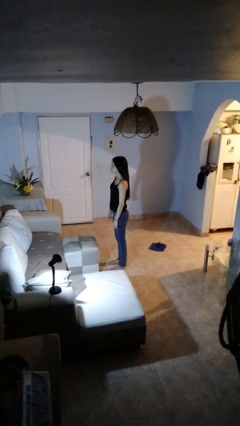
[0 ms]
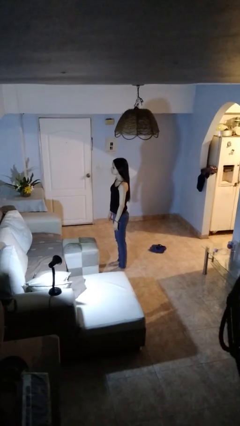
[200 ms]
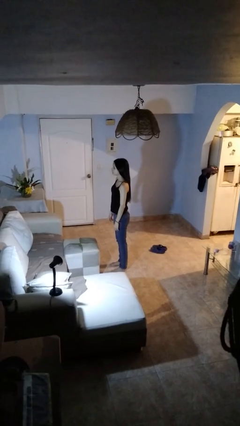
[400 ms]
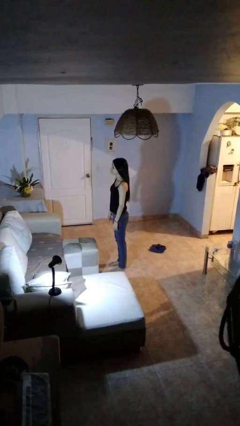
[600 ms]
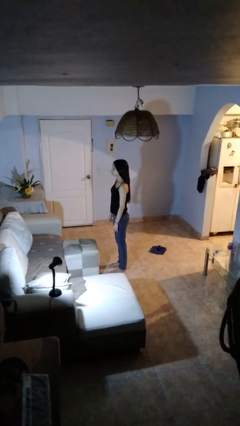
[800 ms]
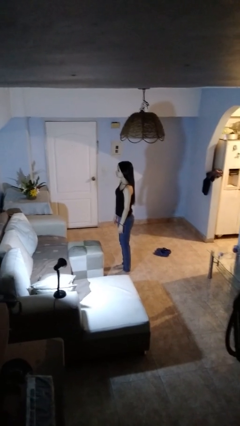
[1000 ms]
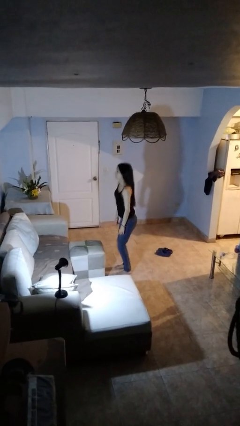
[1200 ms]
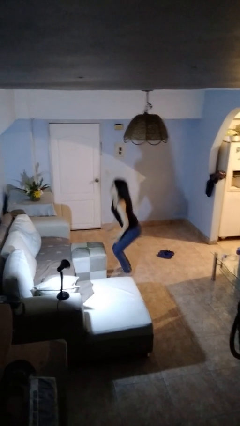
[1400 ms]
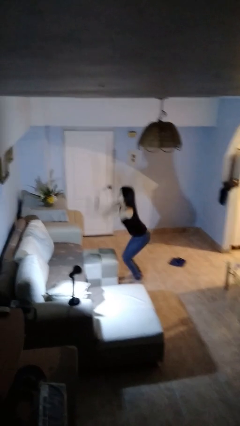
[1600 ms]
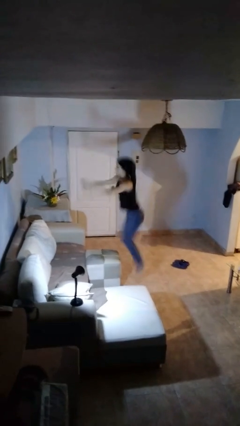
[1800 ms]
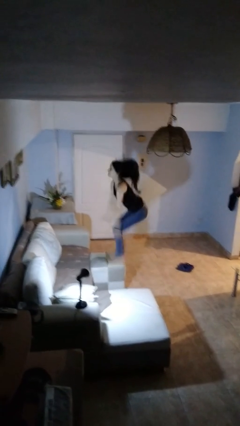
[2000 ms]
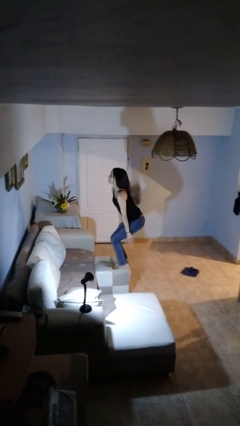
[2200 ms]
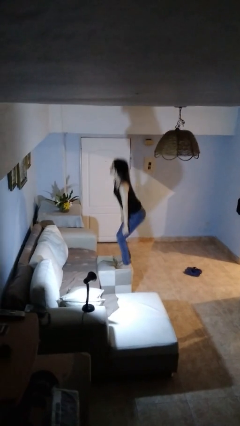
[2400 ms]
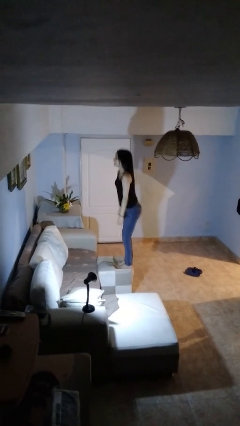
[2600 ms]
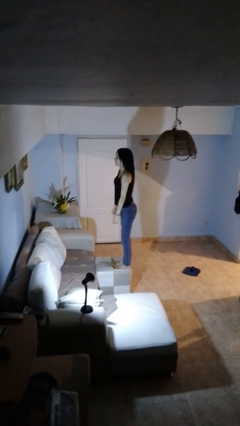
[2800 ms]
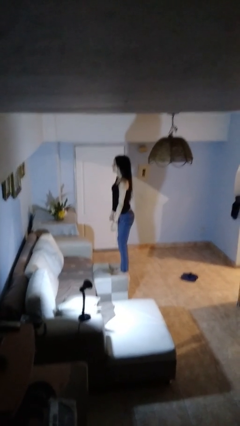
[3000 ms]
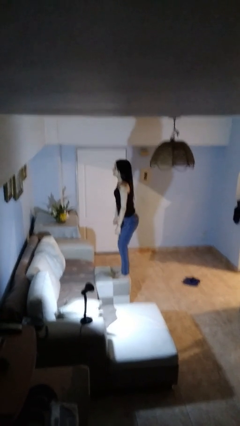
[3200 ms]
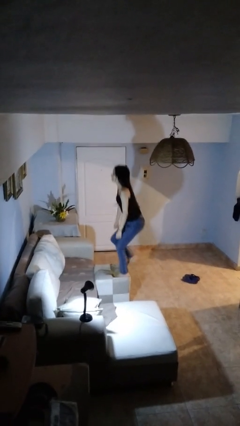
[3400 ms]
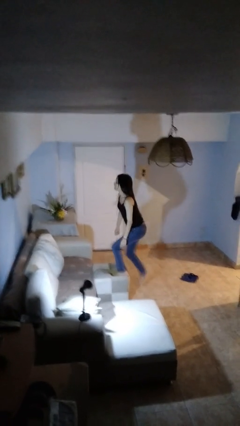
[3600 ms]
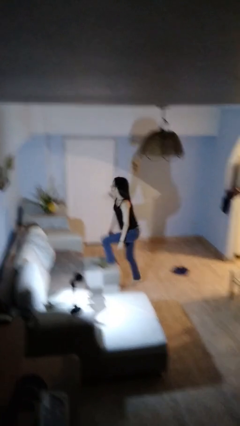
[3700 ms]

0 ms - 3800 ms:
person jumps on couch

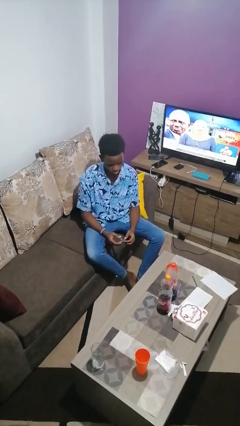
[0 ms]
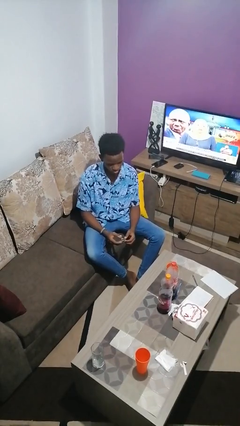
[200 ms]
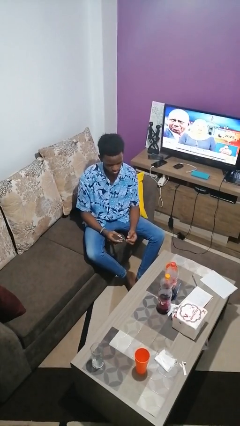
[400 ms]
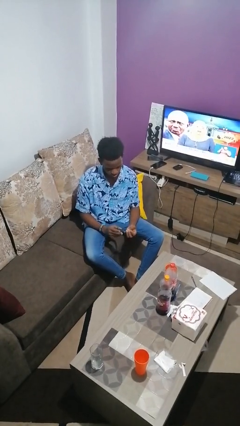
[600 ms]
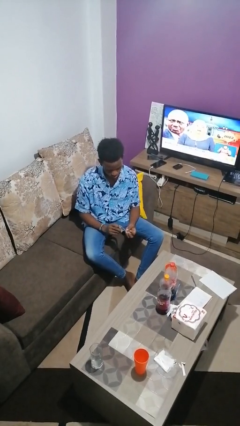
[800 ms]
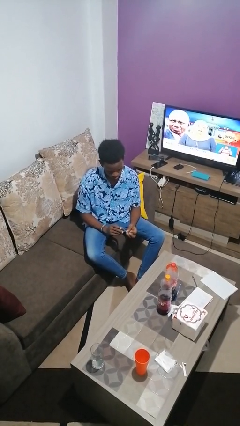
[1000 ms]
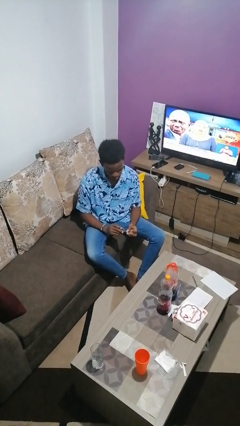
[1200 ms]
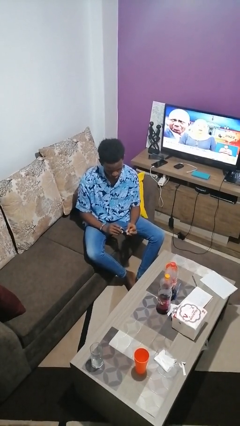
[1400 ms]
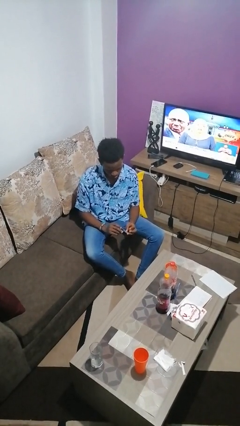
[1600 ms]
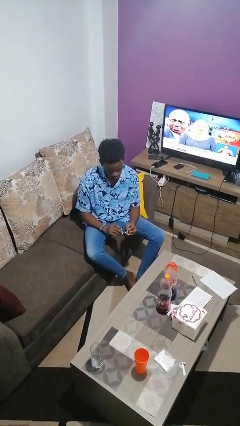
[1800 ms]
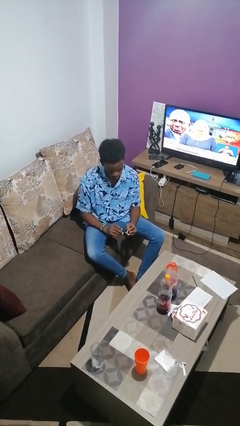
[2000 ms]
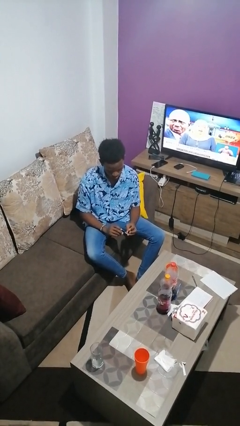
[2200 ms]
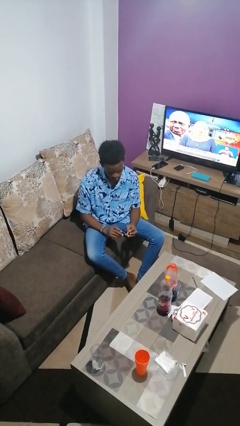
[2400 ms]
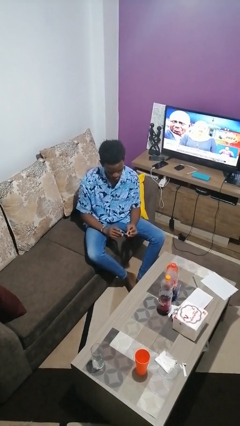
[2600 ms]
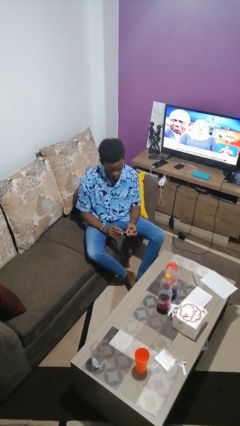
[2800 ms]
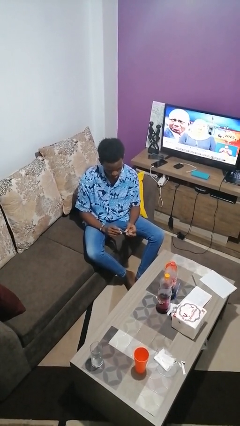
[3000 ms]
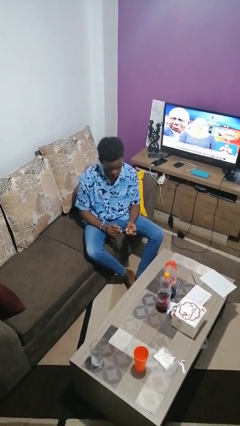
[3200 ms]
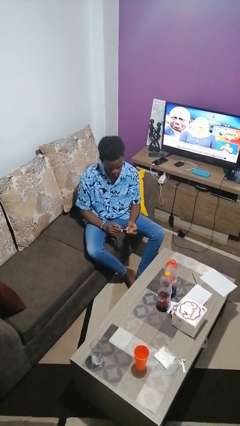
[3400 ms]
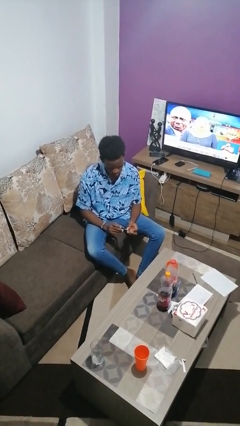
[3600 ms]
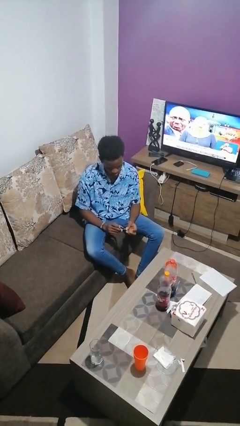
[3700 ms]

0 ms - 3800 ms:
person clips fingernails

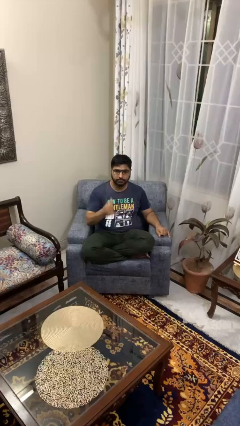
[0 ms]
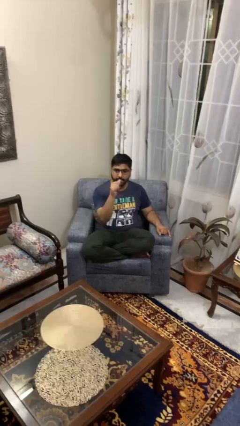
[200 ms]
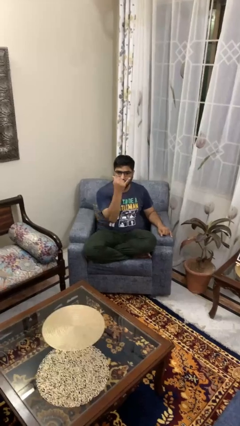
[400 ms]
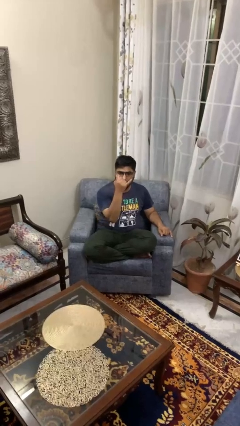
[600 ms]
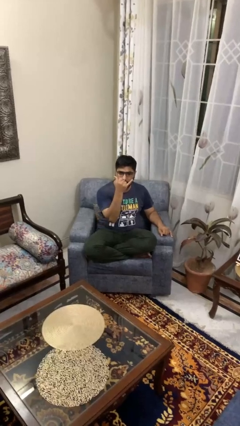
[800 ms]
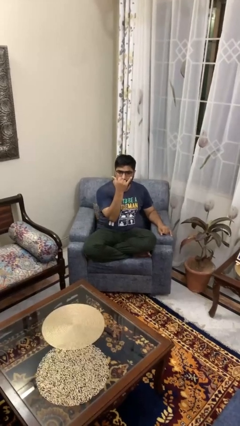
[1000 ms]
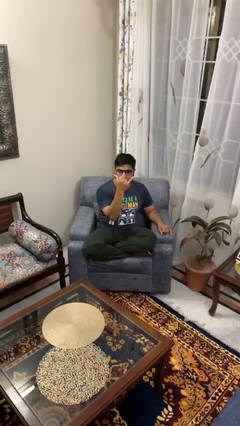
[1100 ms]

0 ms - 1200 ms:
person gestures hang loose

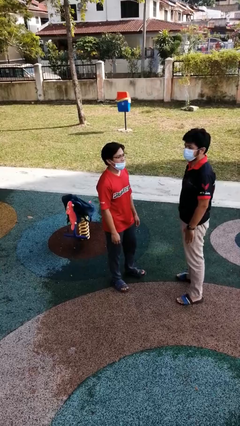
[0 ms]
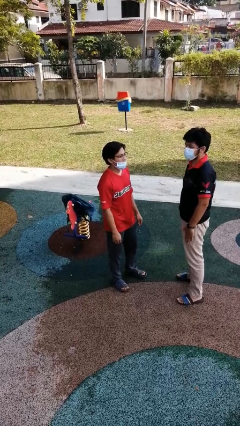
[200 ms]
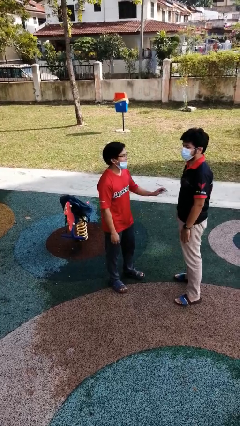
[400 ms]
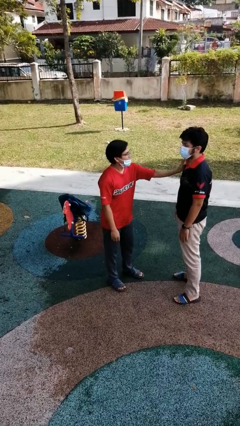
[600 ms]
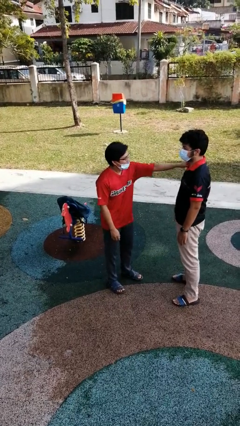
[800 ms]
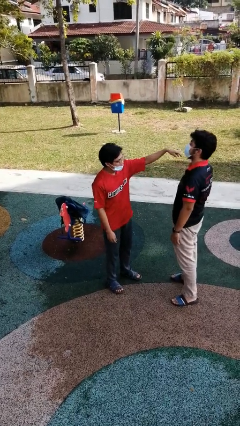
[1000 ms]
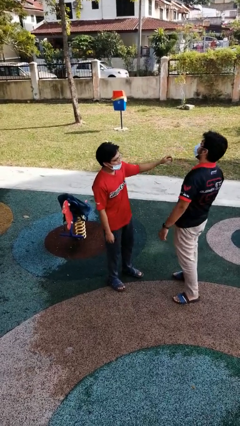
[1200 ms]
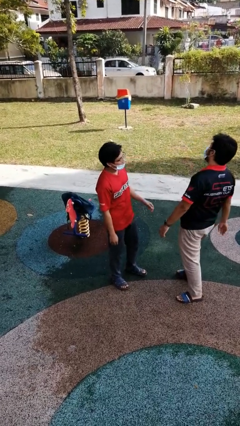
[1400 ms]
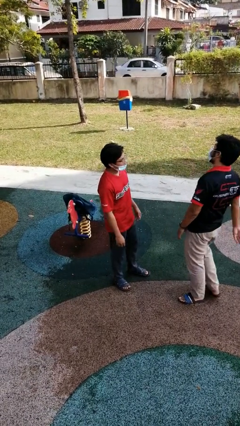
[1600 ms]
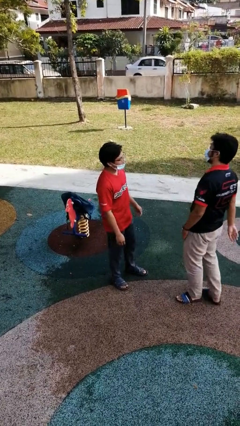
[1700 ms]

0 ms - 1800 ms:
person shoves person

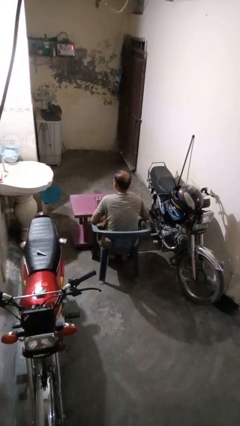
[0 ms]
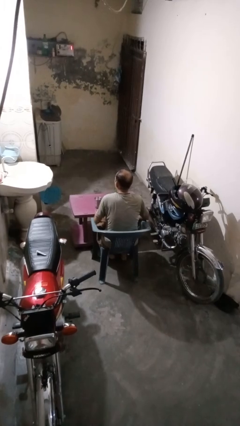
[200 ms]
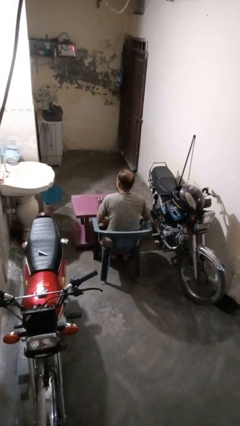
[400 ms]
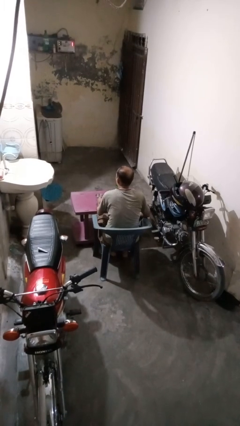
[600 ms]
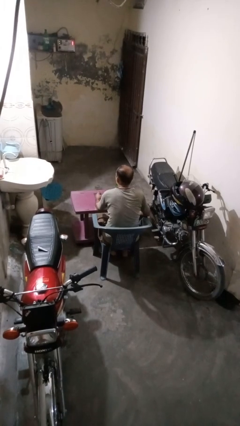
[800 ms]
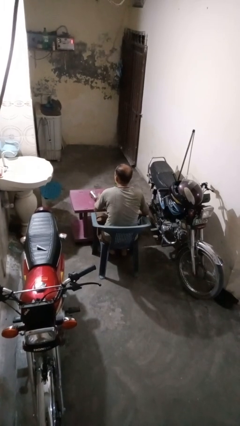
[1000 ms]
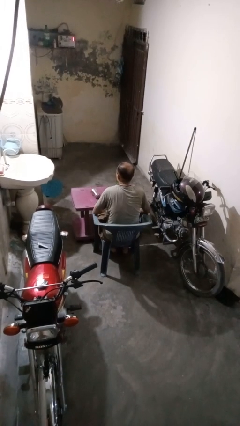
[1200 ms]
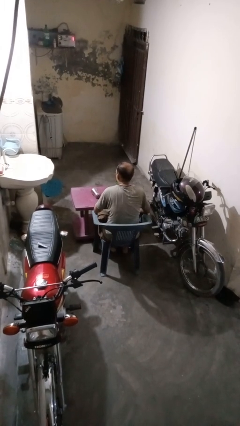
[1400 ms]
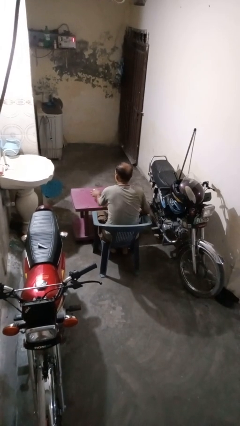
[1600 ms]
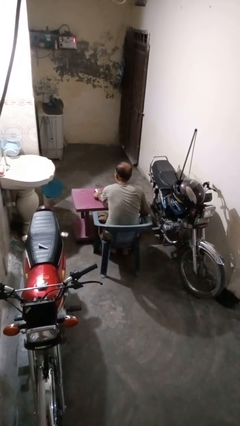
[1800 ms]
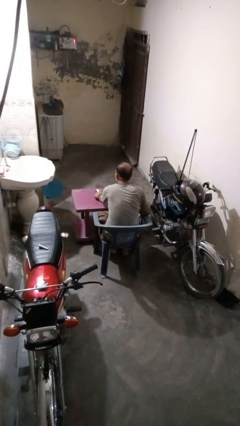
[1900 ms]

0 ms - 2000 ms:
person knocks over glass

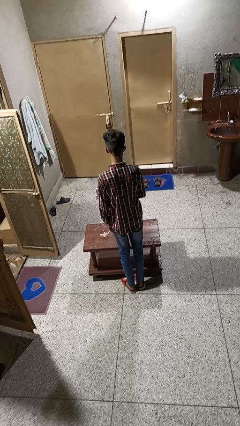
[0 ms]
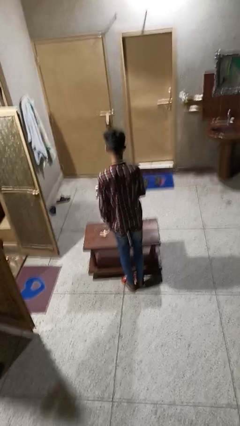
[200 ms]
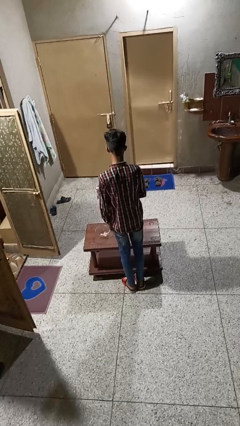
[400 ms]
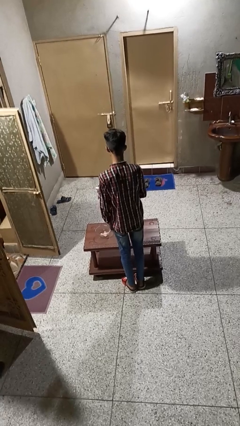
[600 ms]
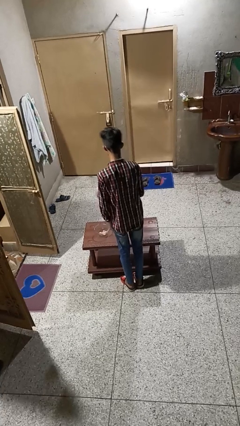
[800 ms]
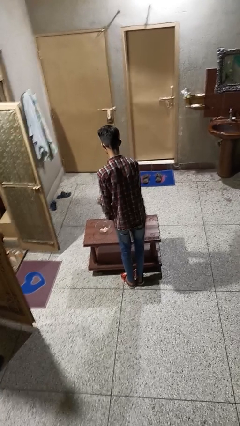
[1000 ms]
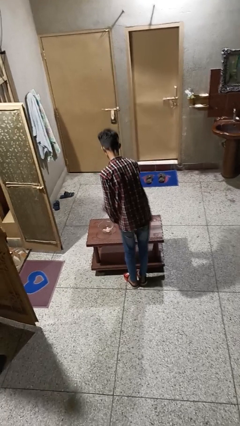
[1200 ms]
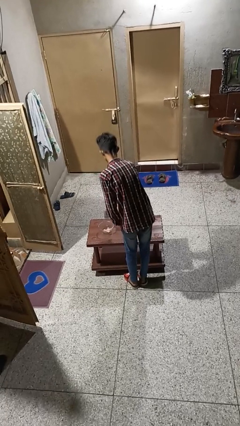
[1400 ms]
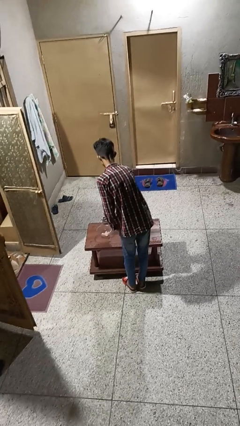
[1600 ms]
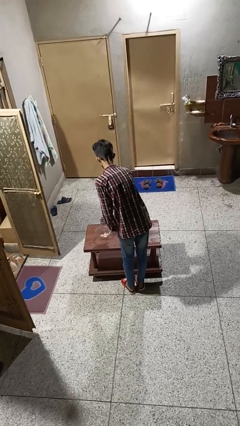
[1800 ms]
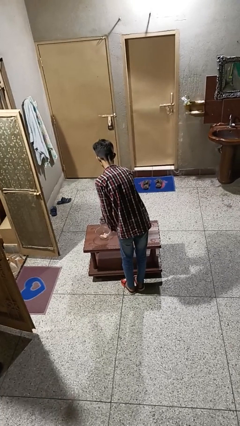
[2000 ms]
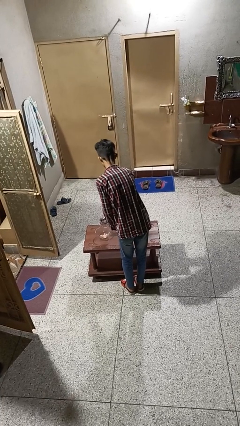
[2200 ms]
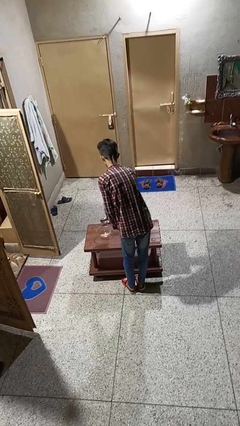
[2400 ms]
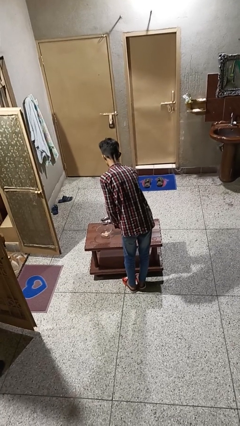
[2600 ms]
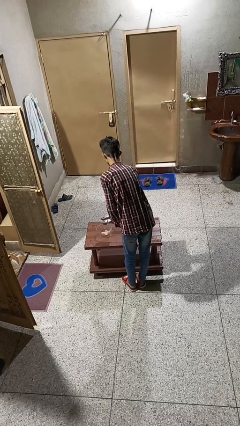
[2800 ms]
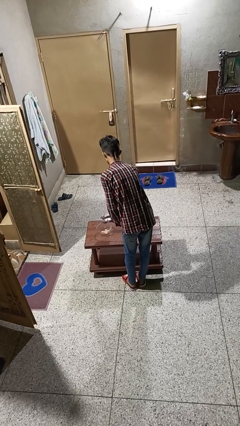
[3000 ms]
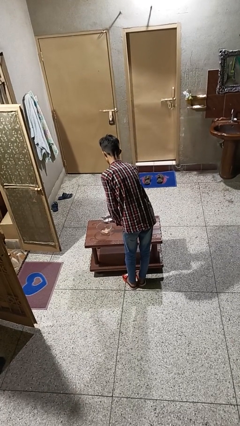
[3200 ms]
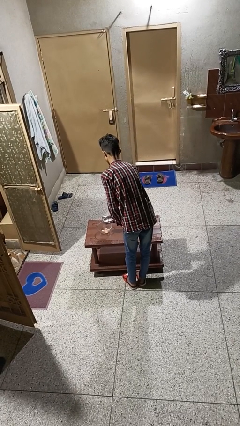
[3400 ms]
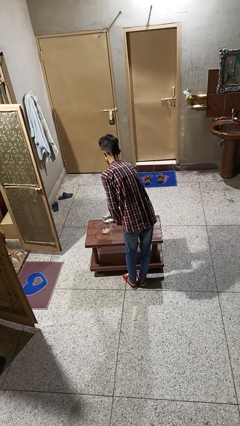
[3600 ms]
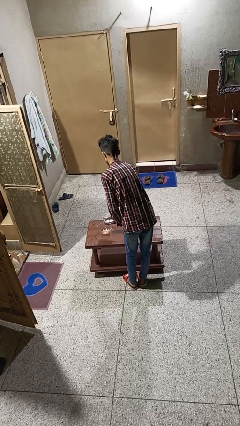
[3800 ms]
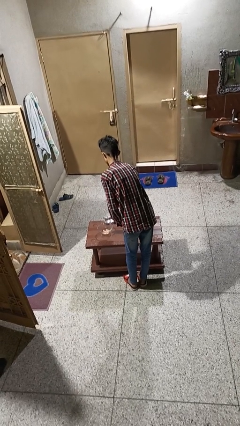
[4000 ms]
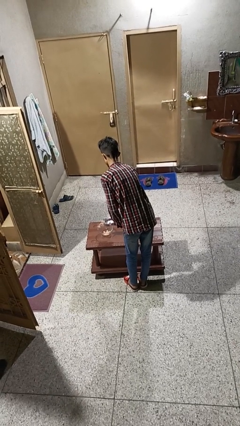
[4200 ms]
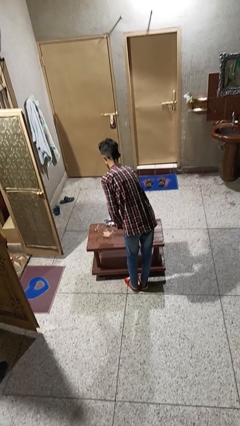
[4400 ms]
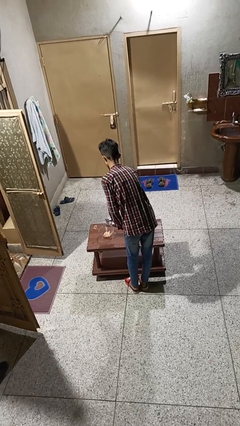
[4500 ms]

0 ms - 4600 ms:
person pours into bowl

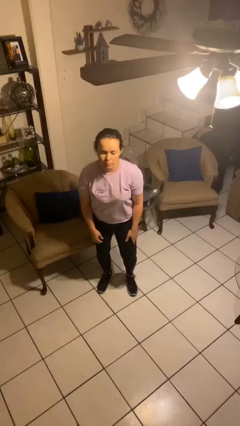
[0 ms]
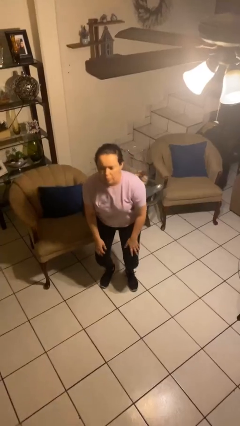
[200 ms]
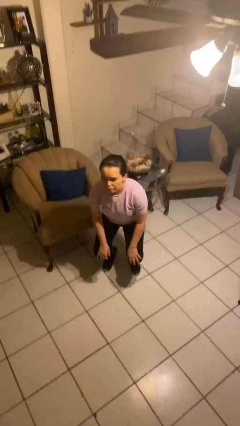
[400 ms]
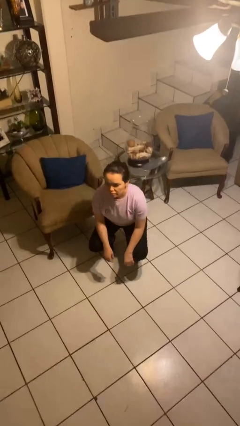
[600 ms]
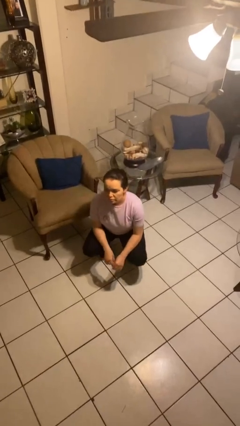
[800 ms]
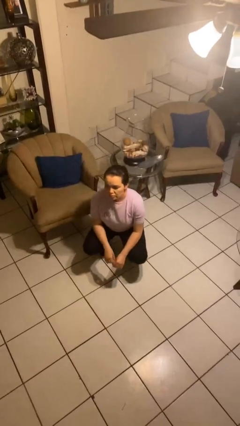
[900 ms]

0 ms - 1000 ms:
person squats
